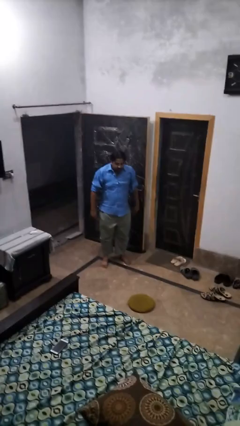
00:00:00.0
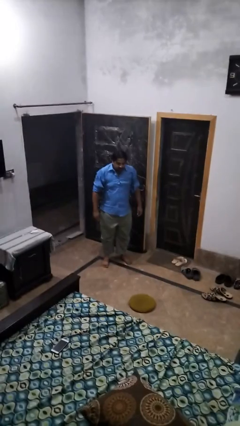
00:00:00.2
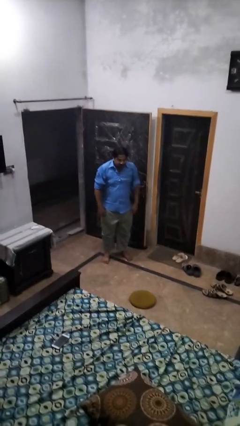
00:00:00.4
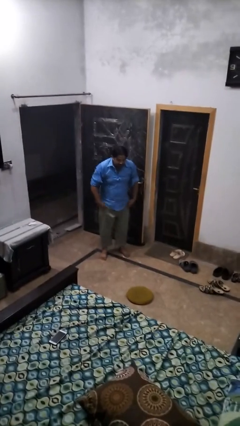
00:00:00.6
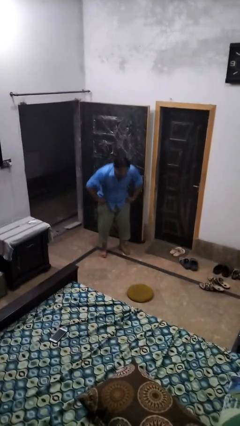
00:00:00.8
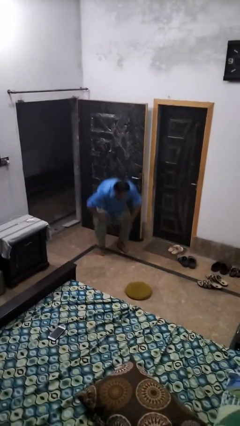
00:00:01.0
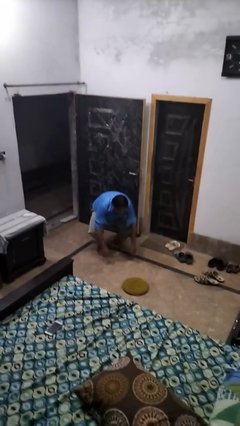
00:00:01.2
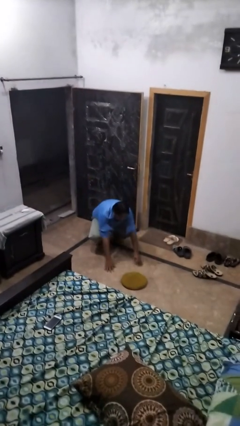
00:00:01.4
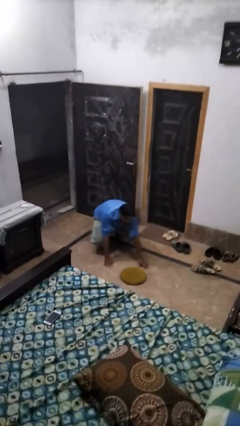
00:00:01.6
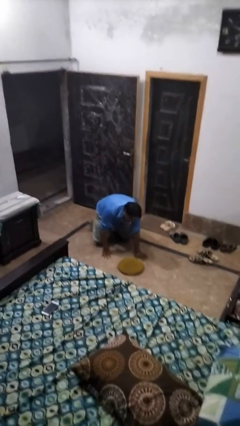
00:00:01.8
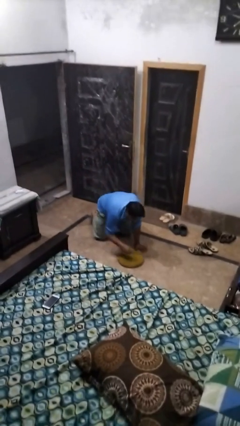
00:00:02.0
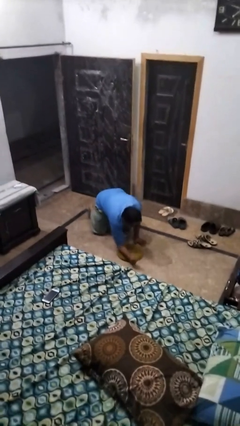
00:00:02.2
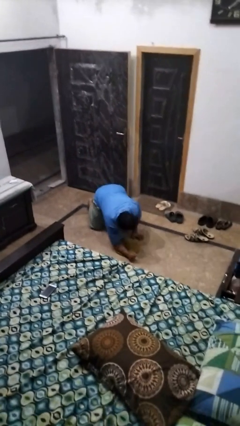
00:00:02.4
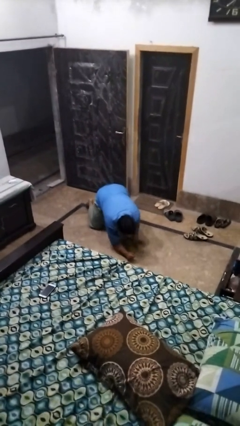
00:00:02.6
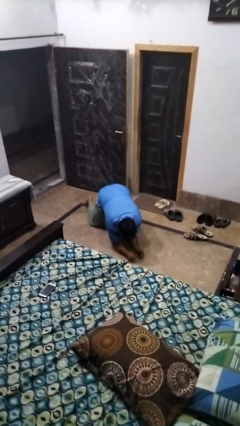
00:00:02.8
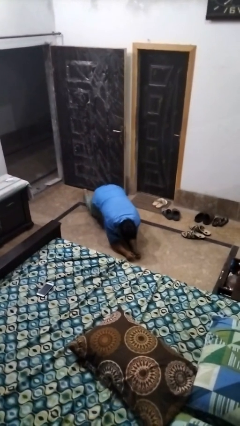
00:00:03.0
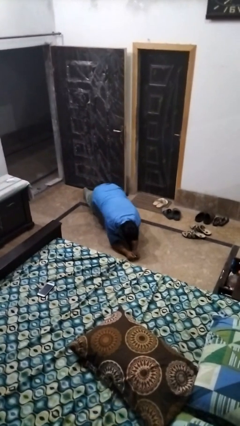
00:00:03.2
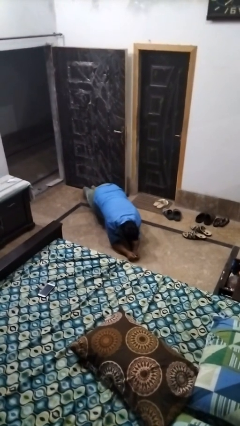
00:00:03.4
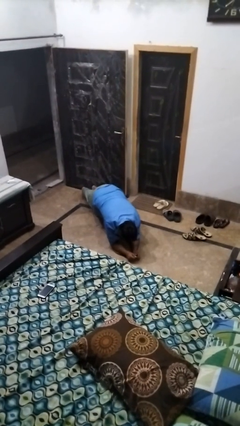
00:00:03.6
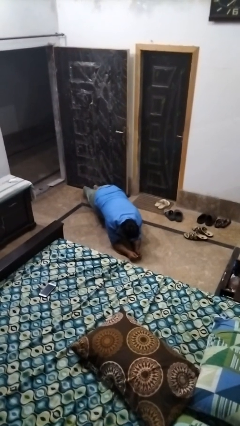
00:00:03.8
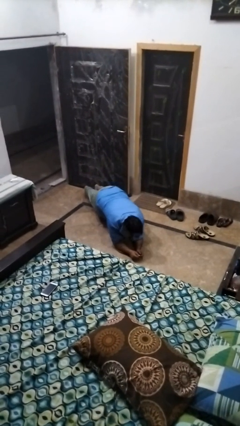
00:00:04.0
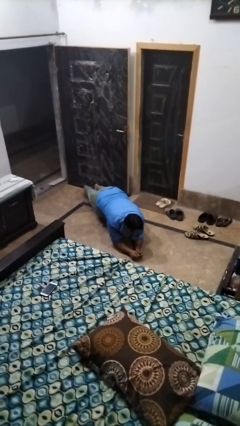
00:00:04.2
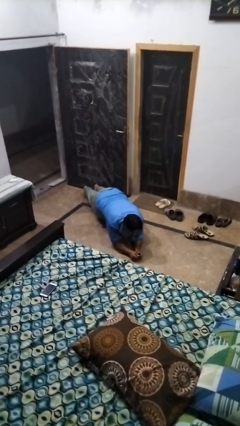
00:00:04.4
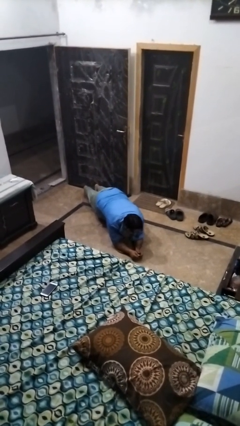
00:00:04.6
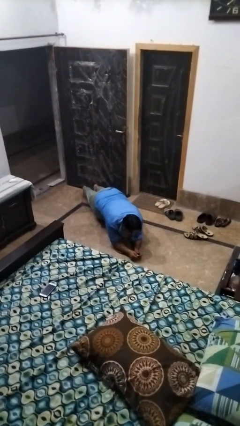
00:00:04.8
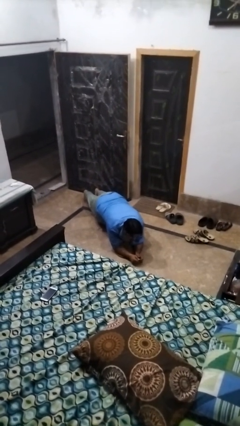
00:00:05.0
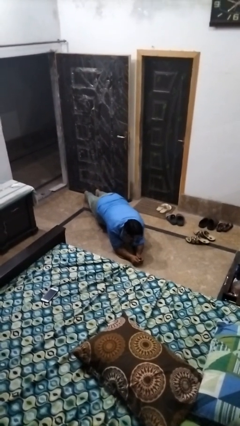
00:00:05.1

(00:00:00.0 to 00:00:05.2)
person exercises with plank

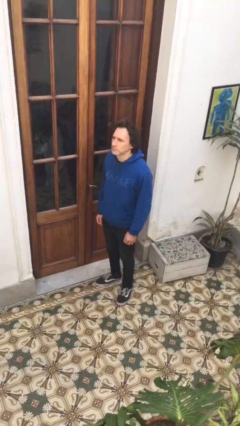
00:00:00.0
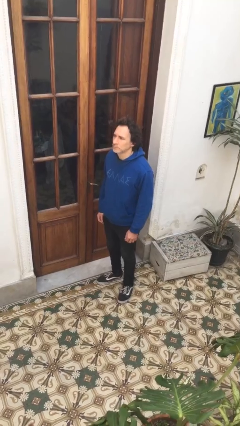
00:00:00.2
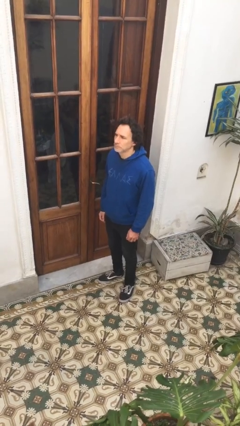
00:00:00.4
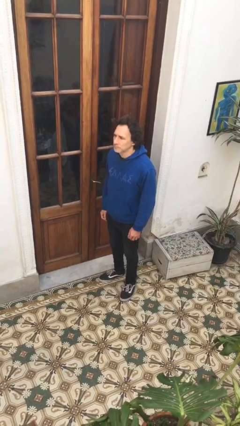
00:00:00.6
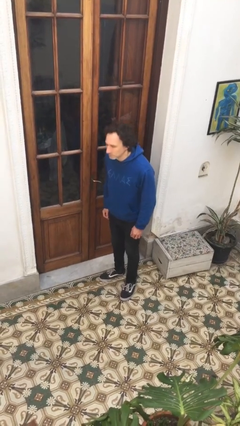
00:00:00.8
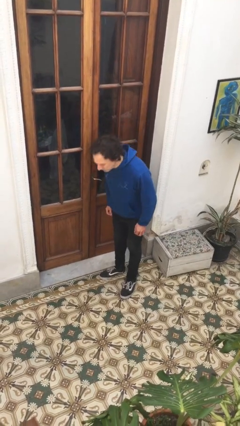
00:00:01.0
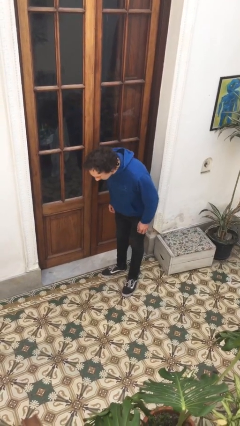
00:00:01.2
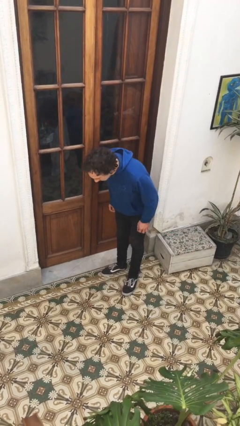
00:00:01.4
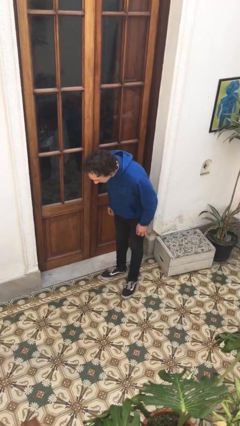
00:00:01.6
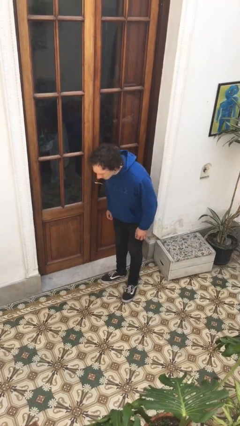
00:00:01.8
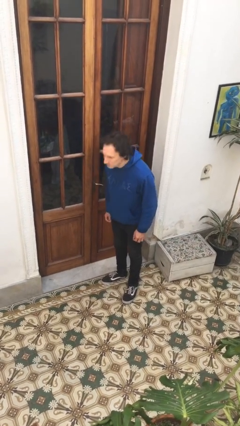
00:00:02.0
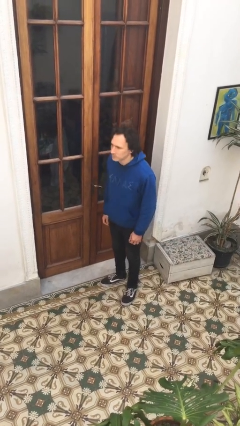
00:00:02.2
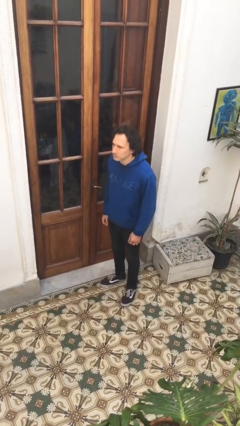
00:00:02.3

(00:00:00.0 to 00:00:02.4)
person bows

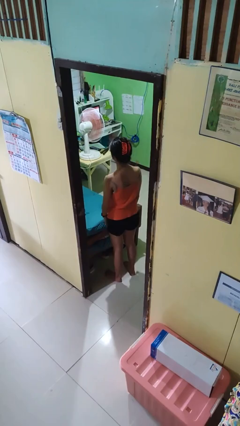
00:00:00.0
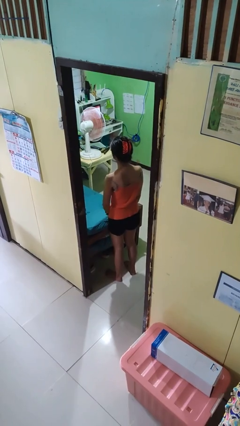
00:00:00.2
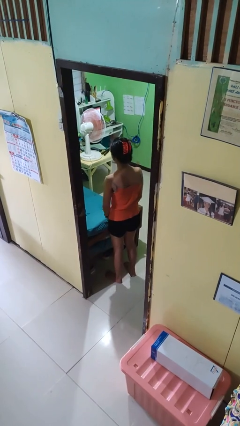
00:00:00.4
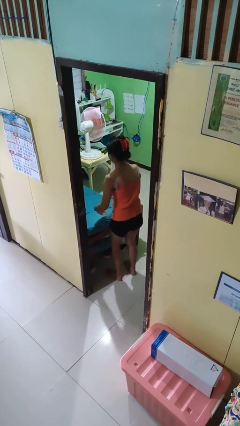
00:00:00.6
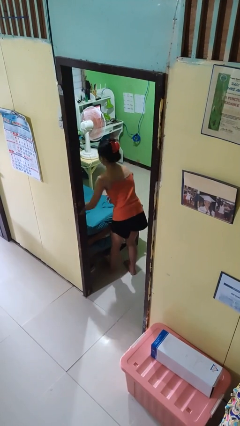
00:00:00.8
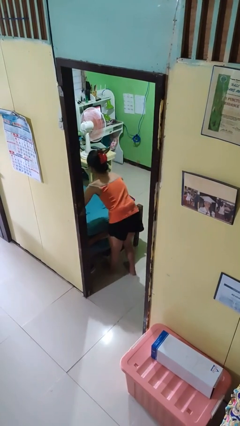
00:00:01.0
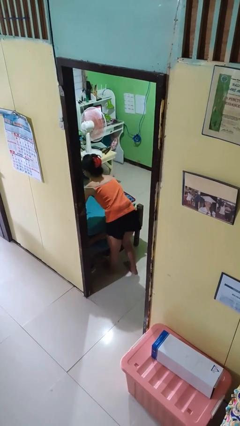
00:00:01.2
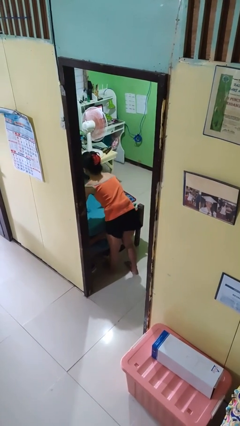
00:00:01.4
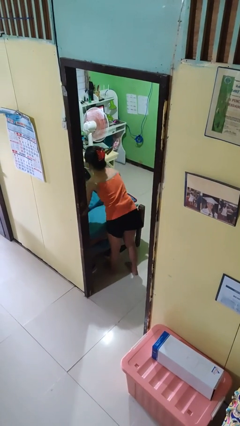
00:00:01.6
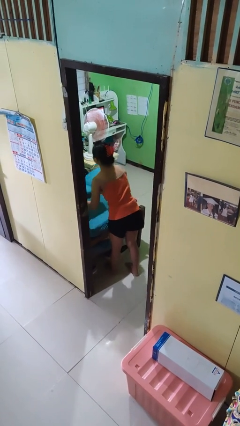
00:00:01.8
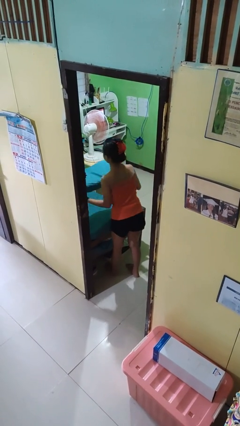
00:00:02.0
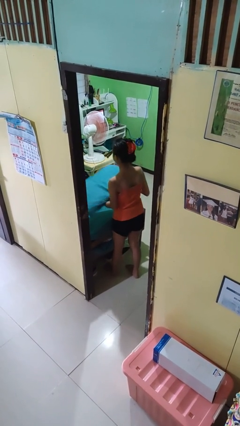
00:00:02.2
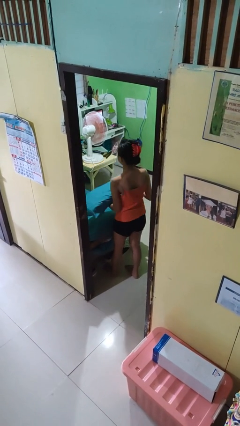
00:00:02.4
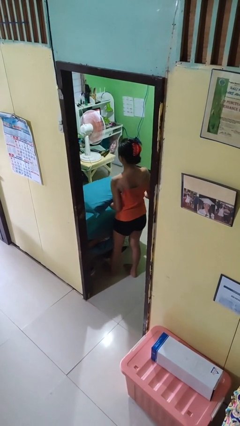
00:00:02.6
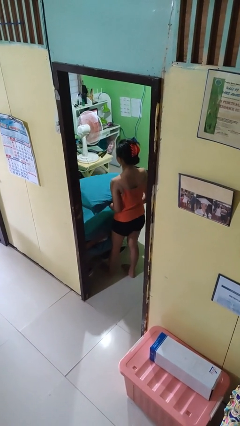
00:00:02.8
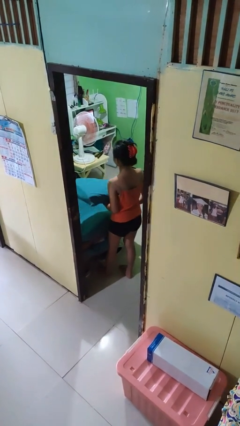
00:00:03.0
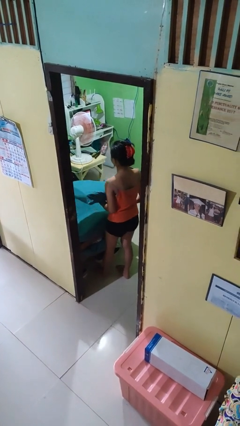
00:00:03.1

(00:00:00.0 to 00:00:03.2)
person picks up object from bed

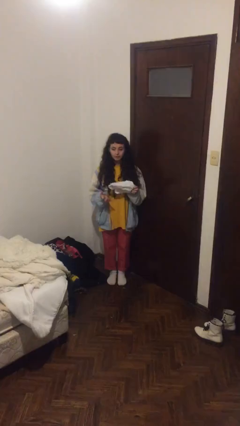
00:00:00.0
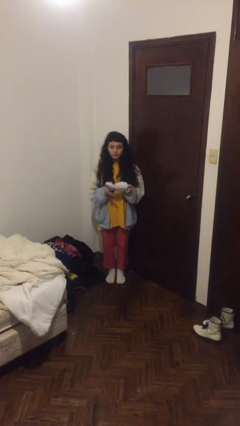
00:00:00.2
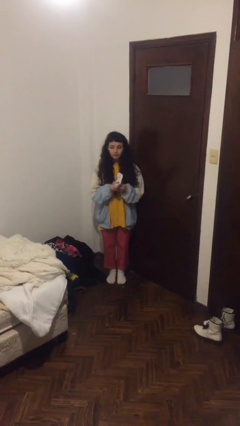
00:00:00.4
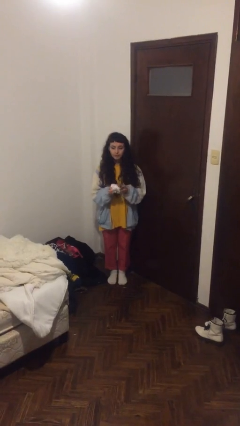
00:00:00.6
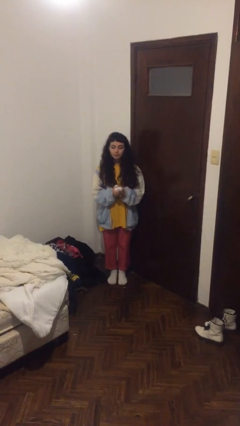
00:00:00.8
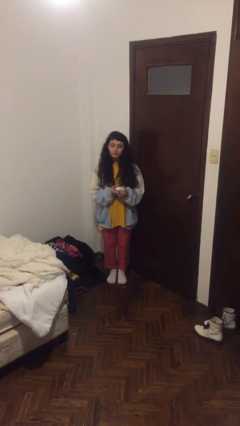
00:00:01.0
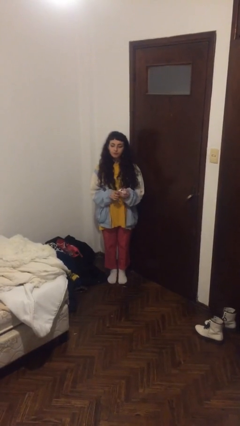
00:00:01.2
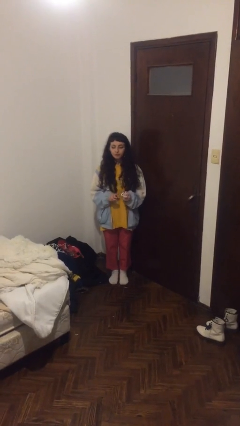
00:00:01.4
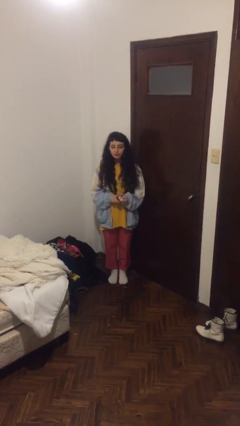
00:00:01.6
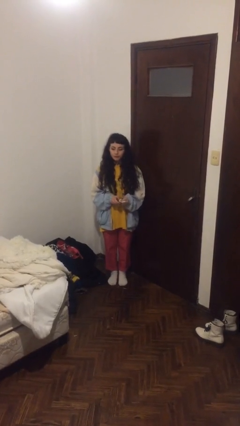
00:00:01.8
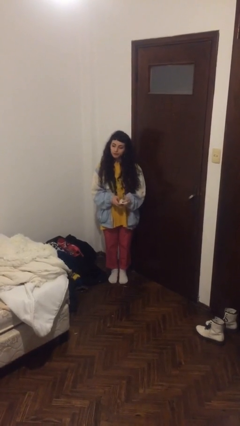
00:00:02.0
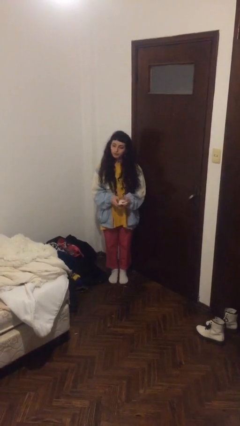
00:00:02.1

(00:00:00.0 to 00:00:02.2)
person crumples paper

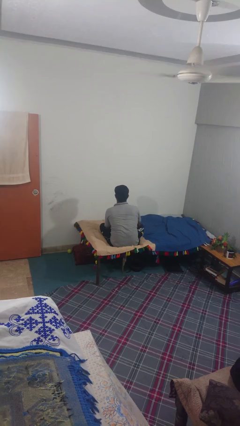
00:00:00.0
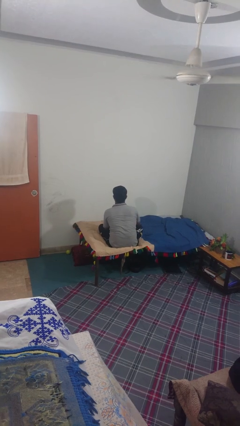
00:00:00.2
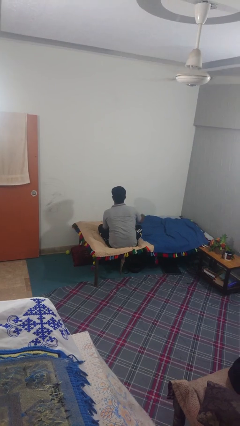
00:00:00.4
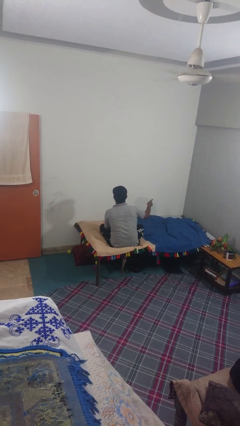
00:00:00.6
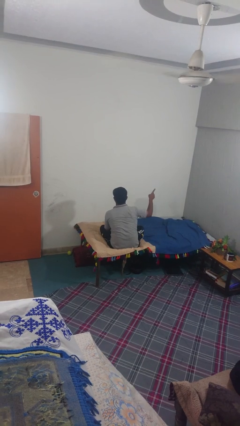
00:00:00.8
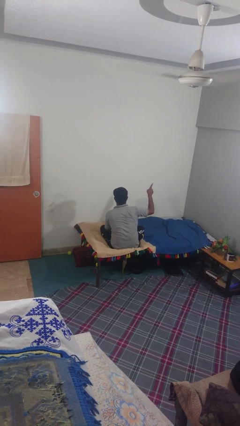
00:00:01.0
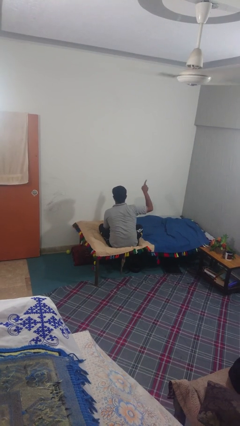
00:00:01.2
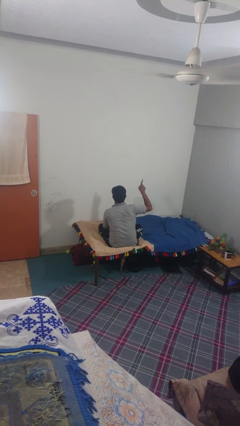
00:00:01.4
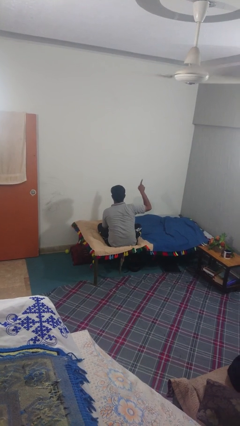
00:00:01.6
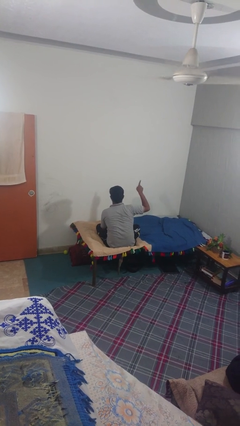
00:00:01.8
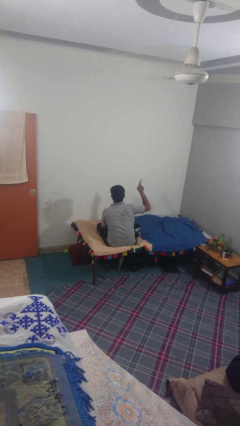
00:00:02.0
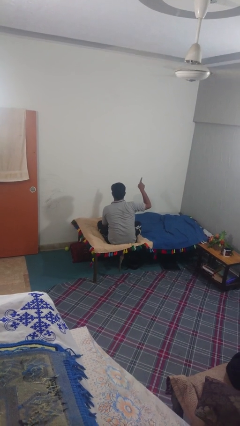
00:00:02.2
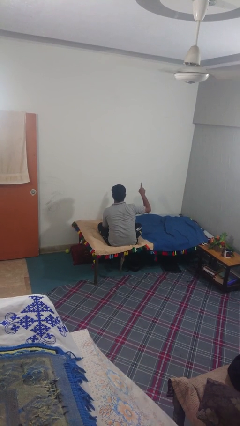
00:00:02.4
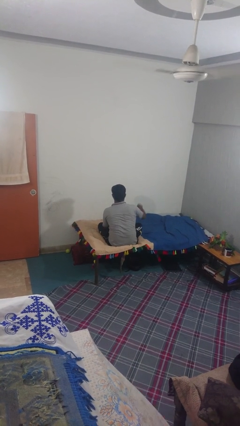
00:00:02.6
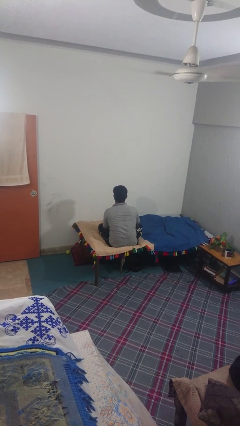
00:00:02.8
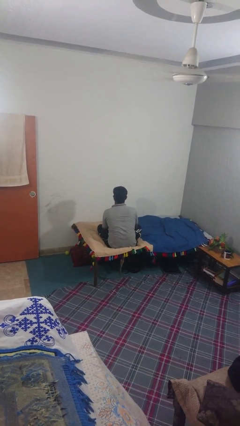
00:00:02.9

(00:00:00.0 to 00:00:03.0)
person gestures number one

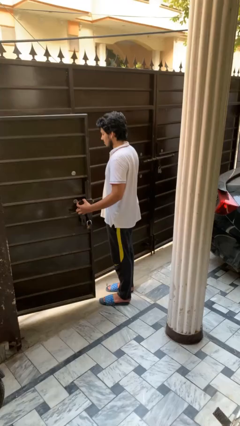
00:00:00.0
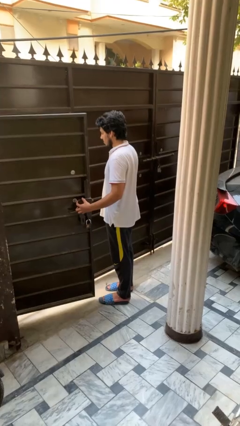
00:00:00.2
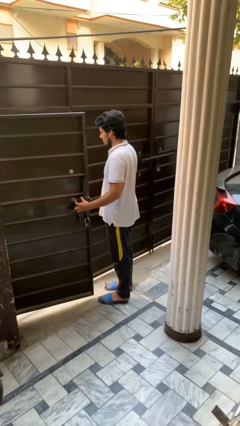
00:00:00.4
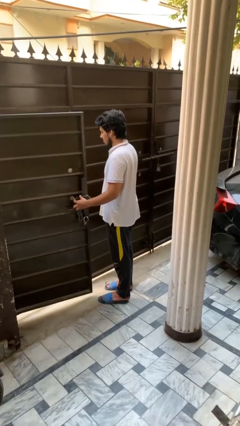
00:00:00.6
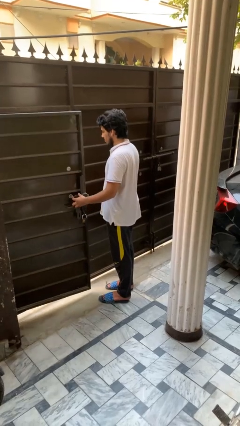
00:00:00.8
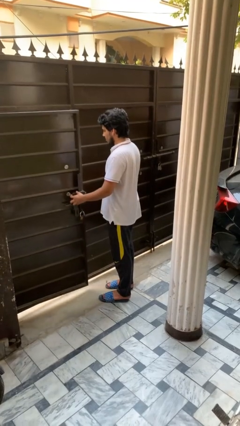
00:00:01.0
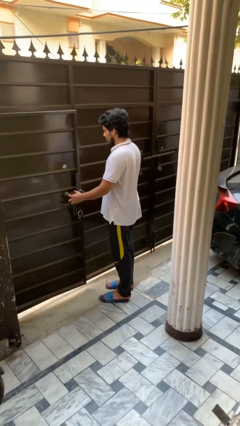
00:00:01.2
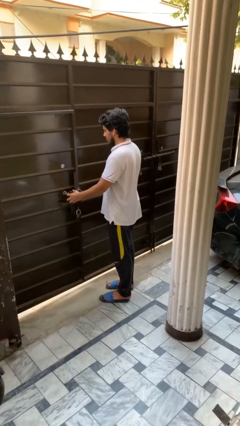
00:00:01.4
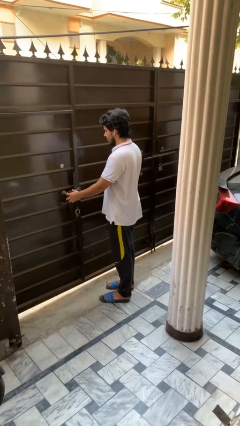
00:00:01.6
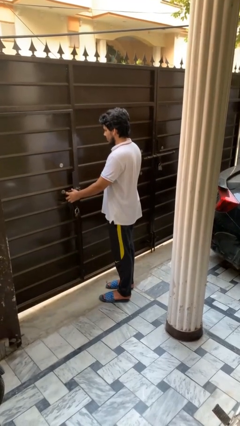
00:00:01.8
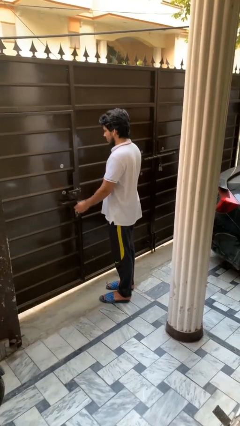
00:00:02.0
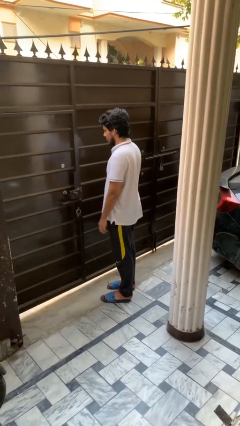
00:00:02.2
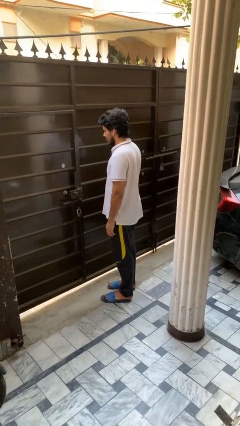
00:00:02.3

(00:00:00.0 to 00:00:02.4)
person closes gate
